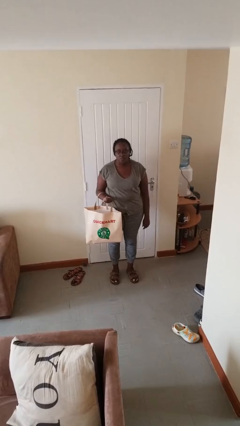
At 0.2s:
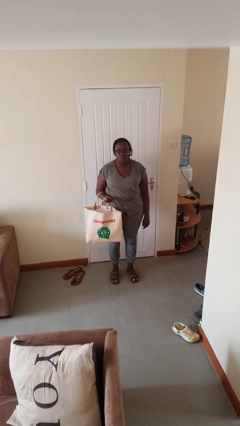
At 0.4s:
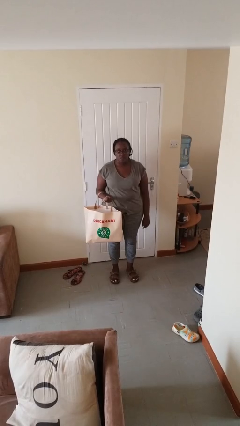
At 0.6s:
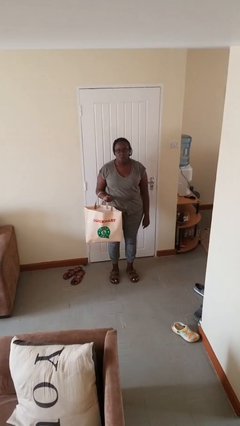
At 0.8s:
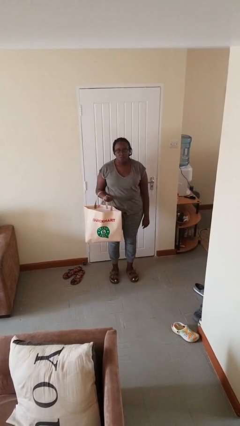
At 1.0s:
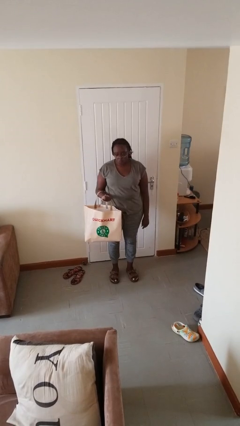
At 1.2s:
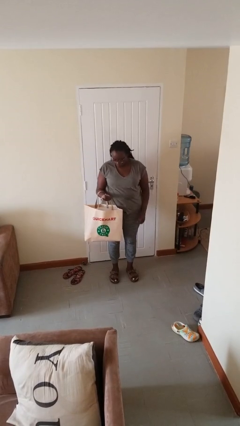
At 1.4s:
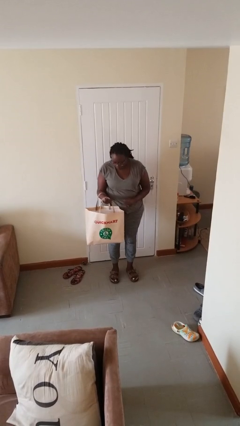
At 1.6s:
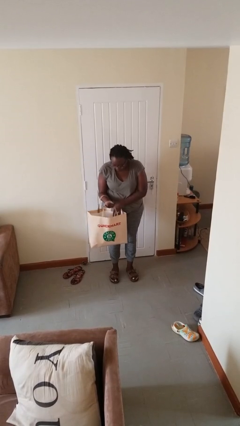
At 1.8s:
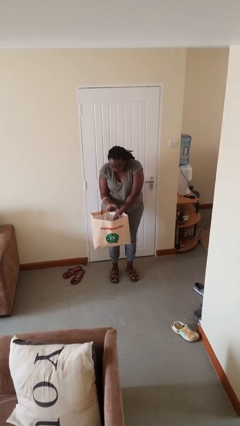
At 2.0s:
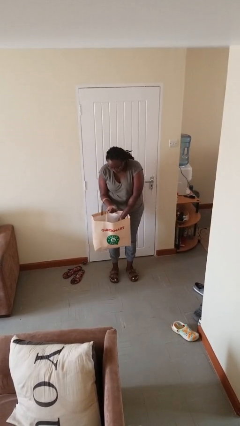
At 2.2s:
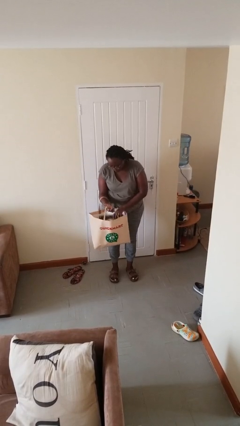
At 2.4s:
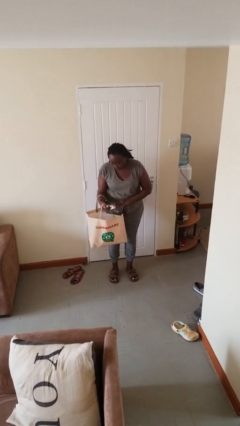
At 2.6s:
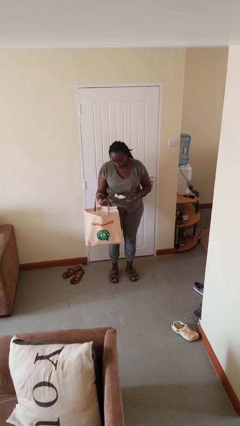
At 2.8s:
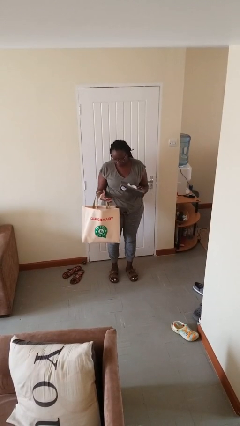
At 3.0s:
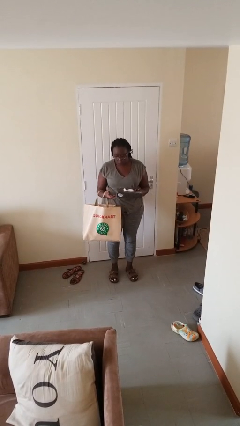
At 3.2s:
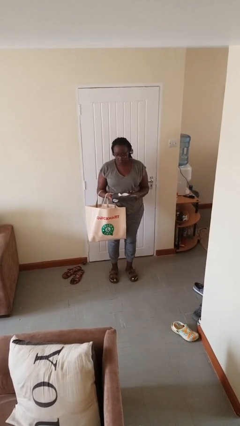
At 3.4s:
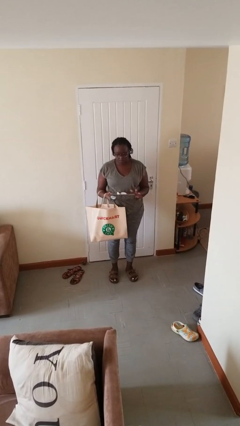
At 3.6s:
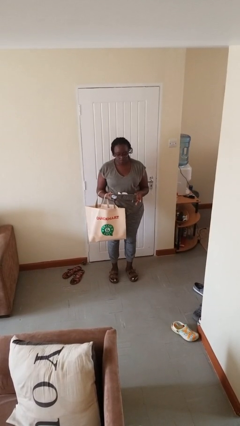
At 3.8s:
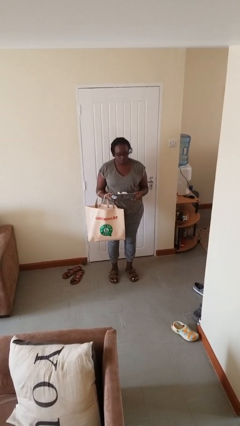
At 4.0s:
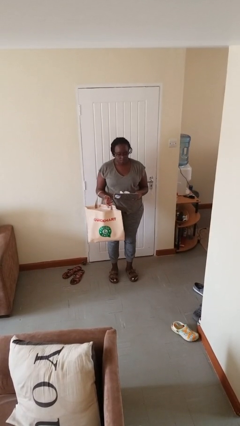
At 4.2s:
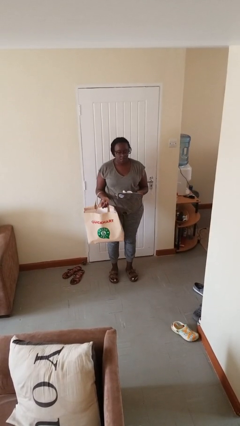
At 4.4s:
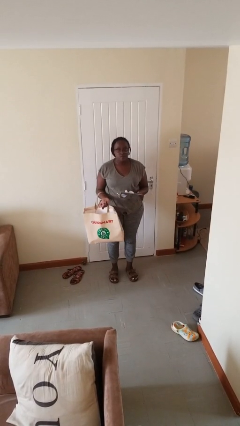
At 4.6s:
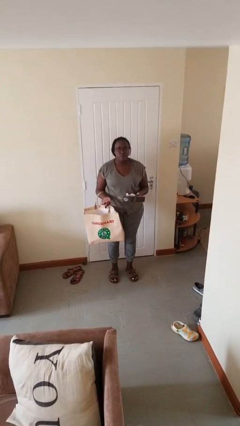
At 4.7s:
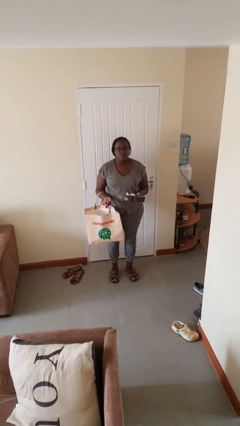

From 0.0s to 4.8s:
person takes object from bag

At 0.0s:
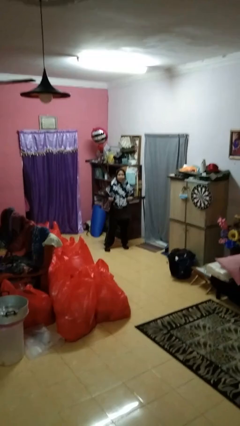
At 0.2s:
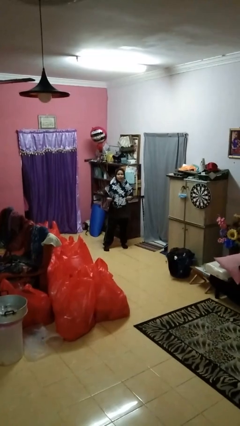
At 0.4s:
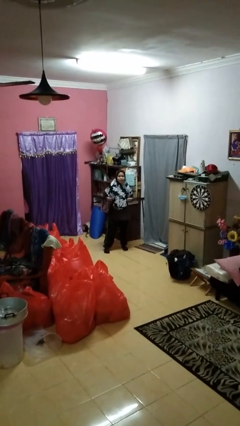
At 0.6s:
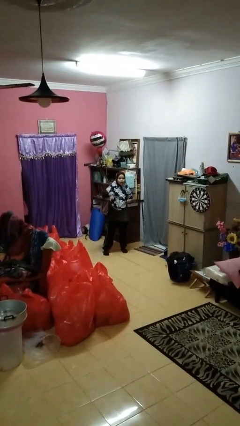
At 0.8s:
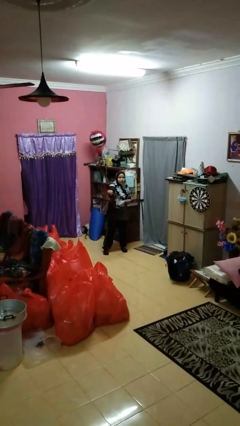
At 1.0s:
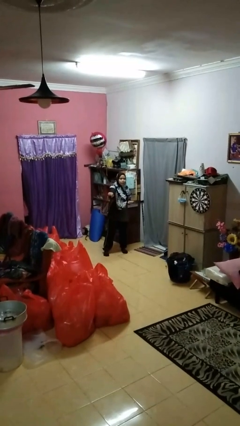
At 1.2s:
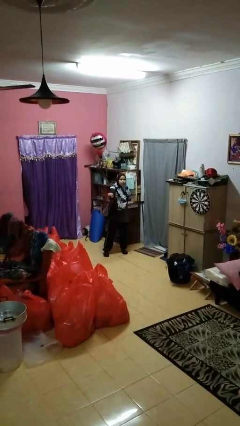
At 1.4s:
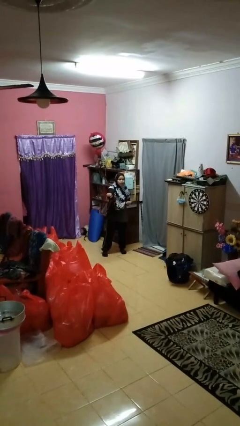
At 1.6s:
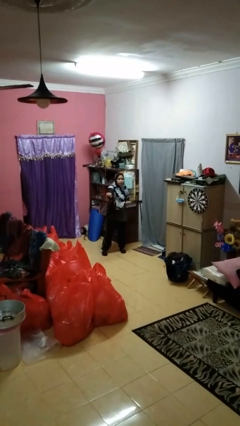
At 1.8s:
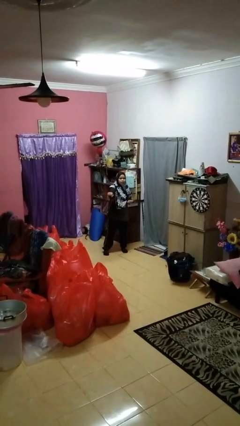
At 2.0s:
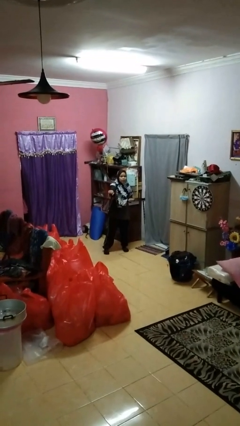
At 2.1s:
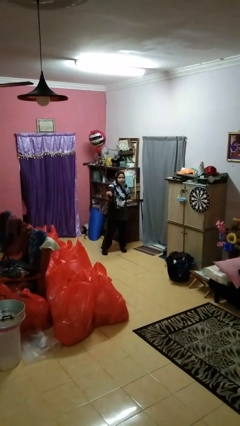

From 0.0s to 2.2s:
person punches

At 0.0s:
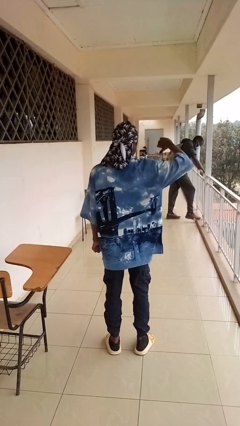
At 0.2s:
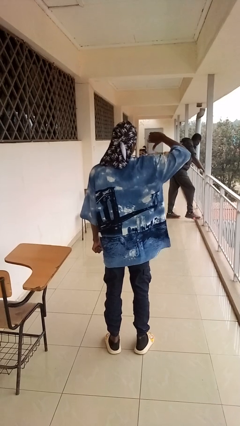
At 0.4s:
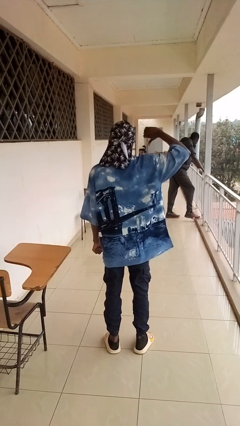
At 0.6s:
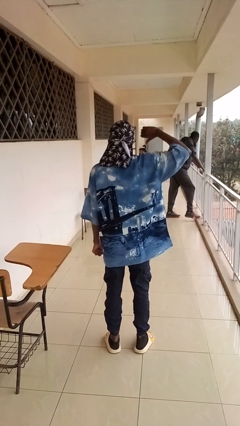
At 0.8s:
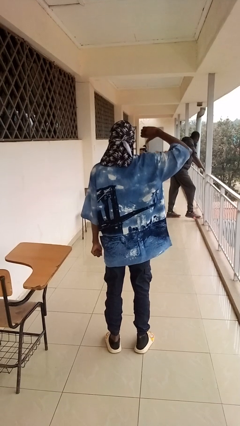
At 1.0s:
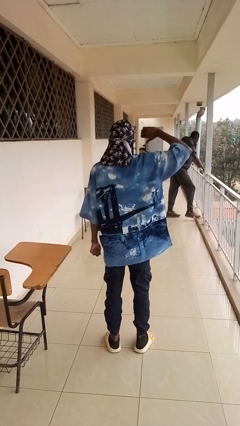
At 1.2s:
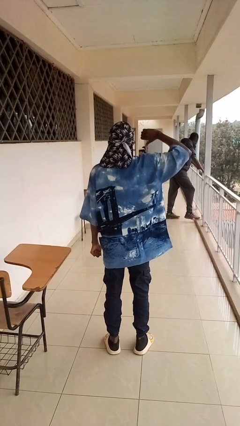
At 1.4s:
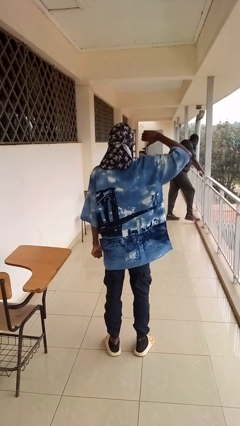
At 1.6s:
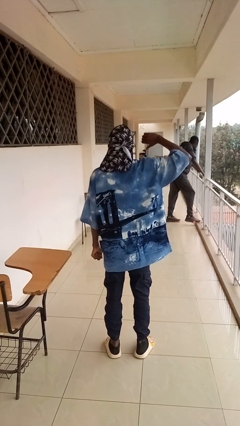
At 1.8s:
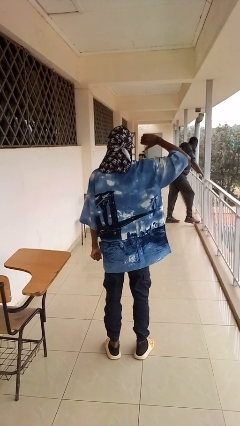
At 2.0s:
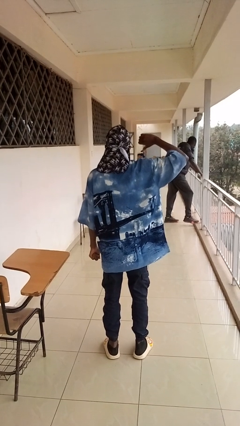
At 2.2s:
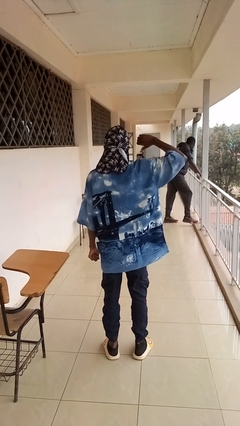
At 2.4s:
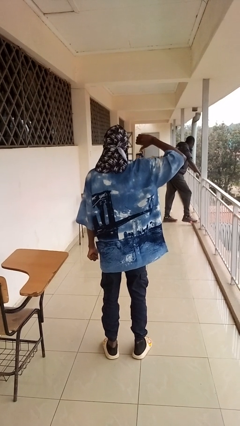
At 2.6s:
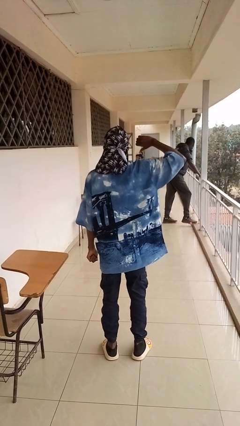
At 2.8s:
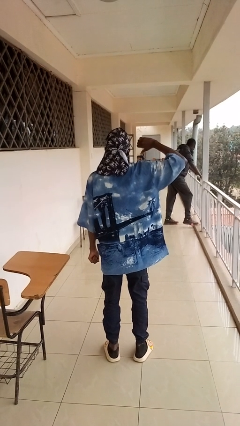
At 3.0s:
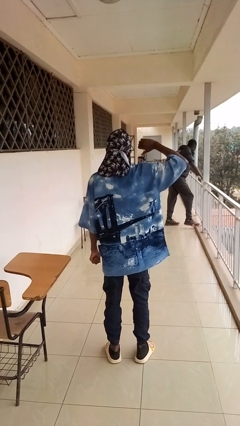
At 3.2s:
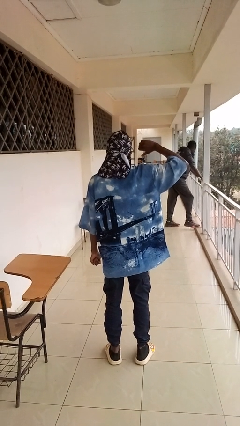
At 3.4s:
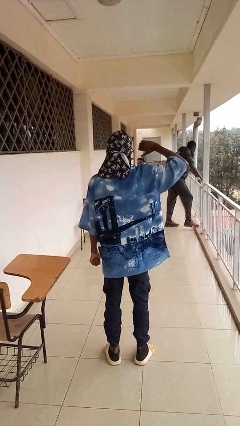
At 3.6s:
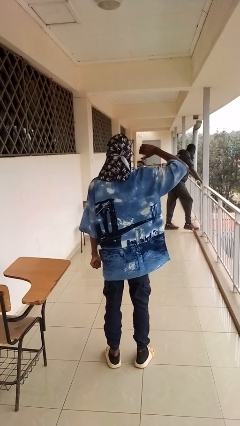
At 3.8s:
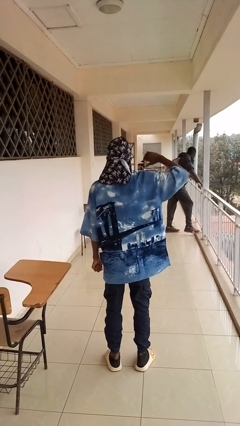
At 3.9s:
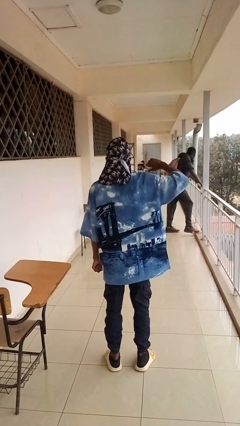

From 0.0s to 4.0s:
person gestures thumbs down

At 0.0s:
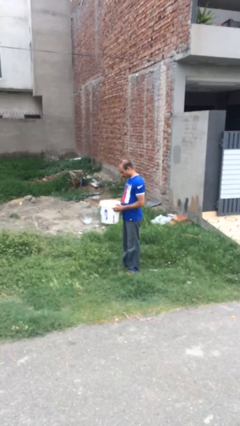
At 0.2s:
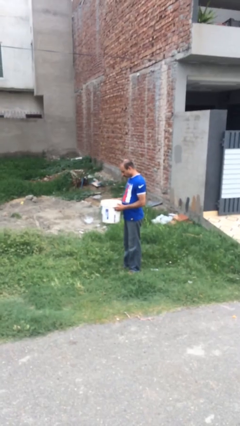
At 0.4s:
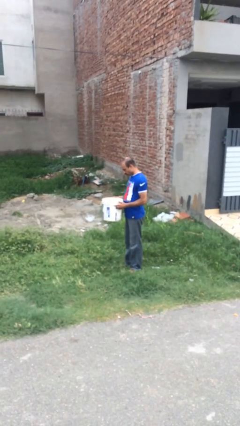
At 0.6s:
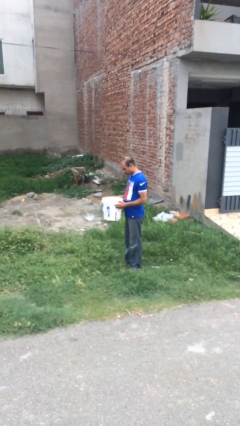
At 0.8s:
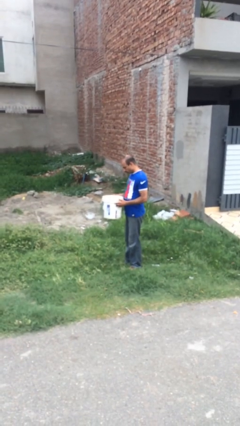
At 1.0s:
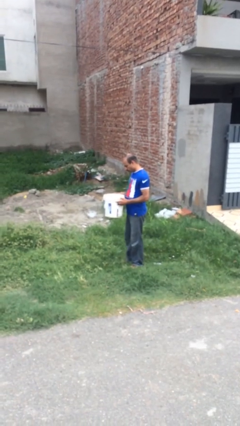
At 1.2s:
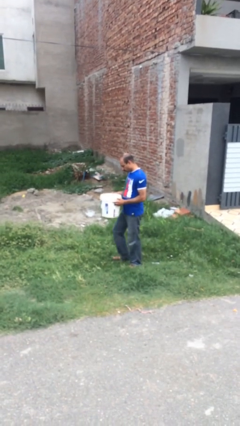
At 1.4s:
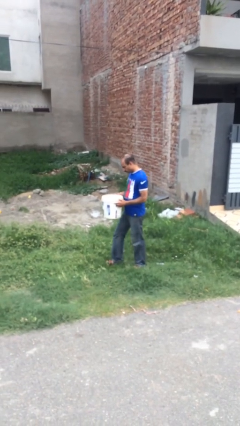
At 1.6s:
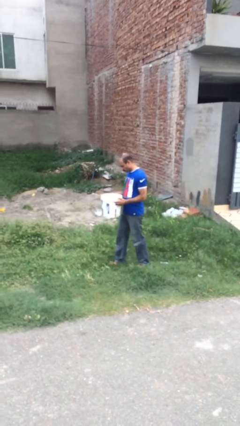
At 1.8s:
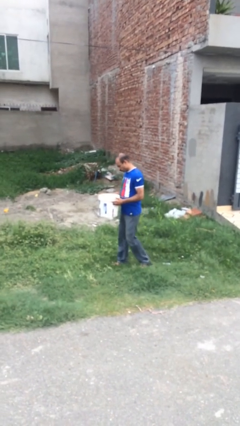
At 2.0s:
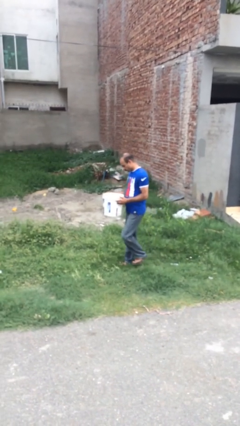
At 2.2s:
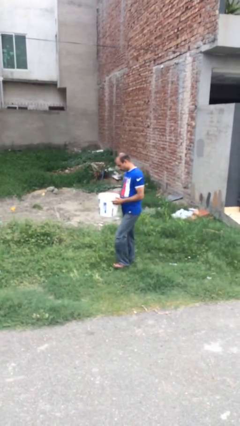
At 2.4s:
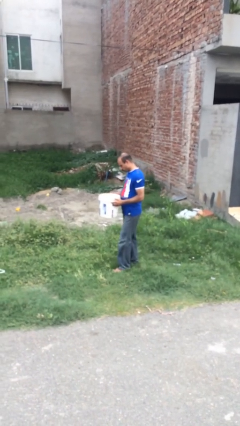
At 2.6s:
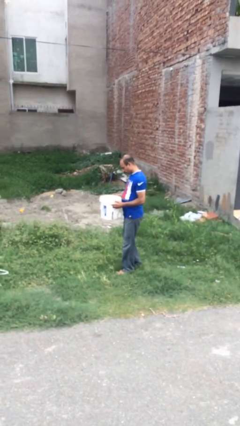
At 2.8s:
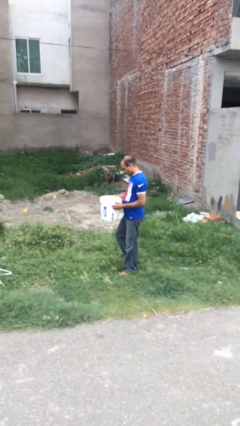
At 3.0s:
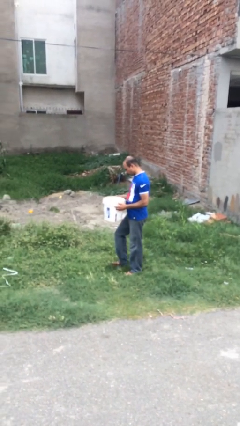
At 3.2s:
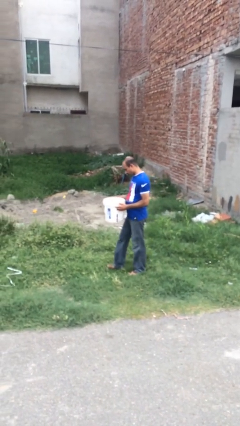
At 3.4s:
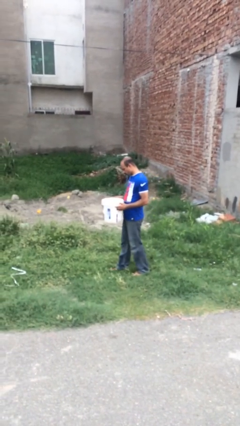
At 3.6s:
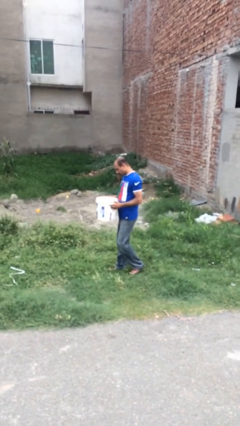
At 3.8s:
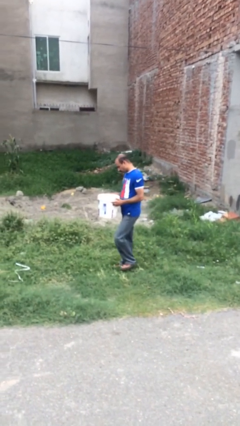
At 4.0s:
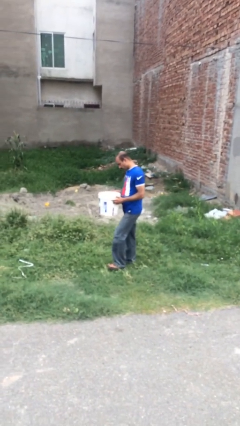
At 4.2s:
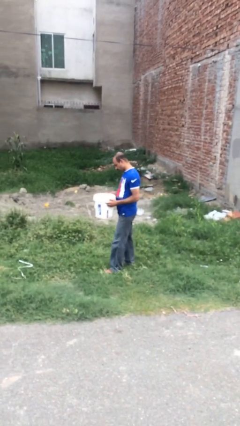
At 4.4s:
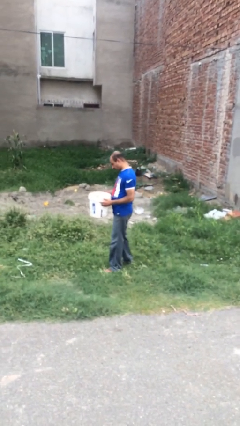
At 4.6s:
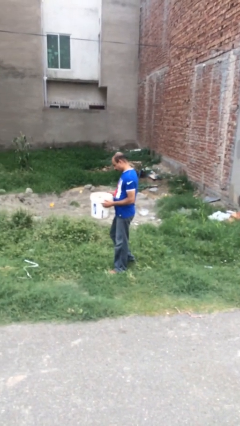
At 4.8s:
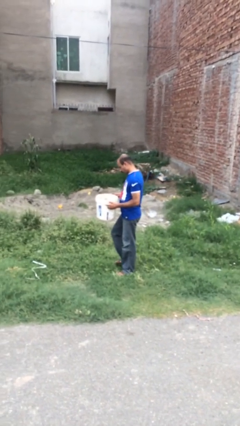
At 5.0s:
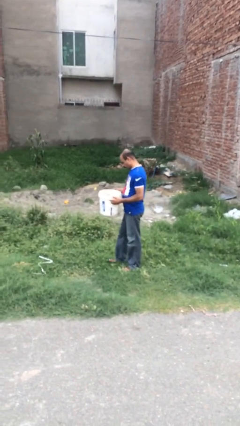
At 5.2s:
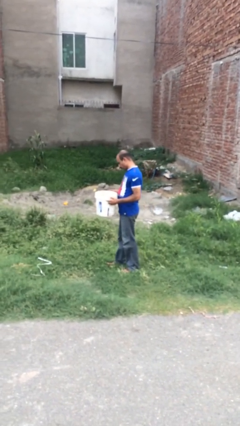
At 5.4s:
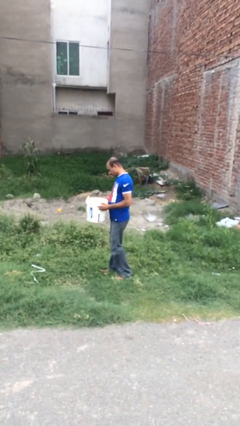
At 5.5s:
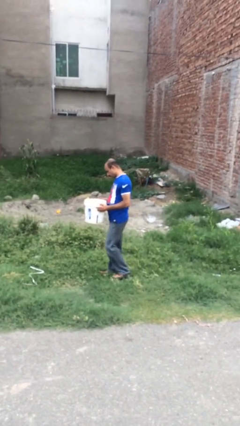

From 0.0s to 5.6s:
person carries heavy object

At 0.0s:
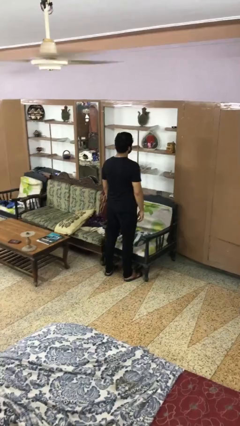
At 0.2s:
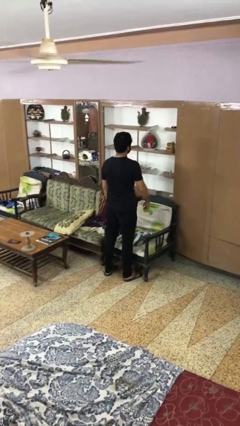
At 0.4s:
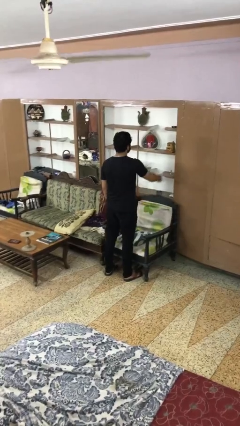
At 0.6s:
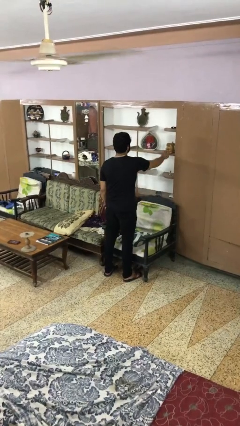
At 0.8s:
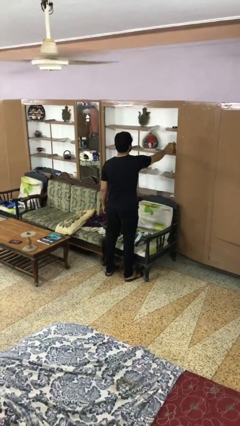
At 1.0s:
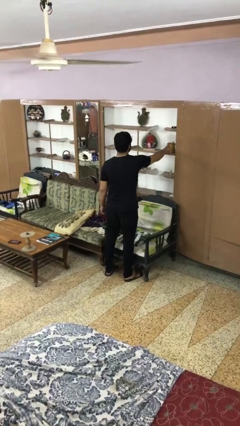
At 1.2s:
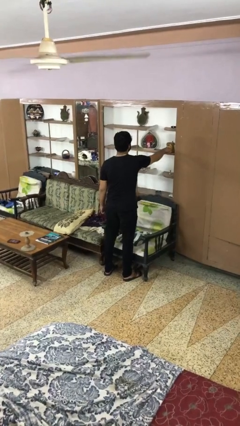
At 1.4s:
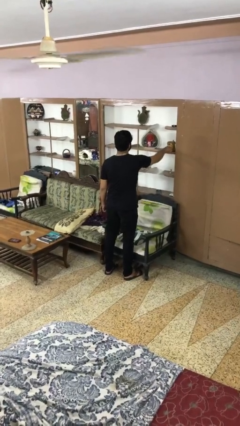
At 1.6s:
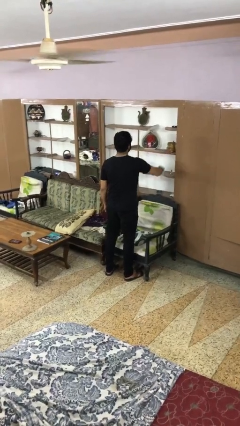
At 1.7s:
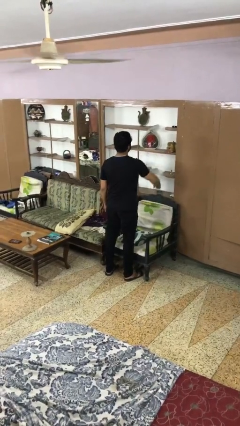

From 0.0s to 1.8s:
person taps object with finger
